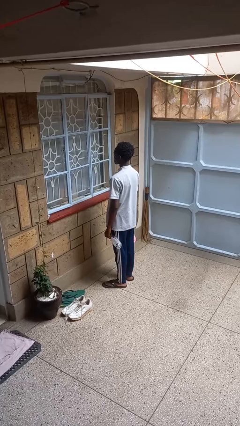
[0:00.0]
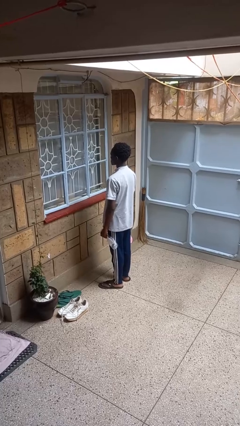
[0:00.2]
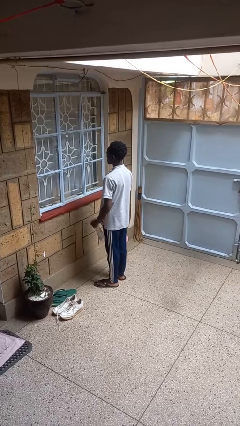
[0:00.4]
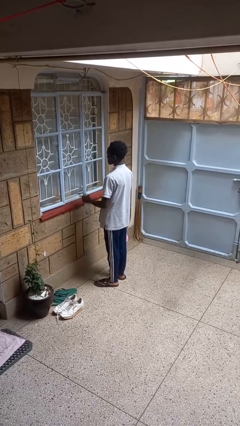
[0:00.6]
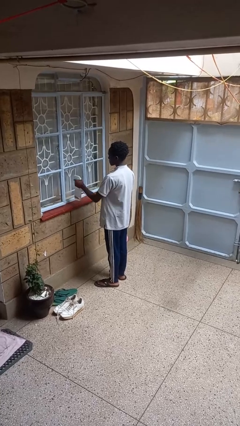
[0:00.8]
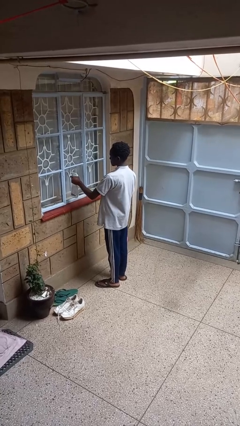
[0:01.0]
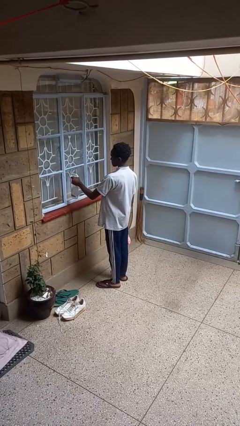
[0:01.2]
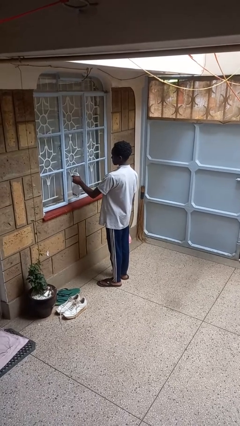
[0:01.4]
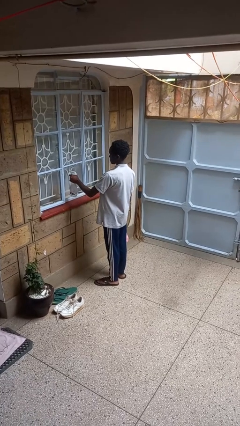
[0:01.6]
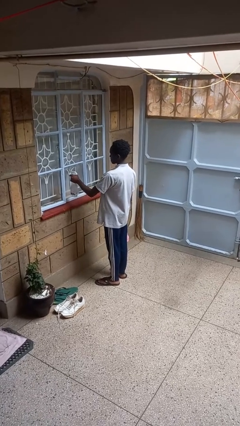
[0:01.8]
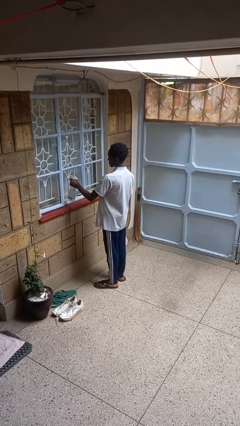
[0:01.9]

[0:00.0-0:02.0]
person sprays from bottle

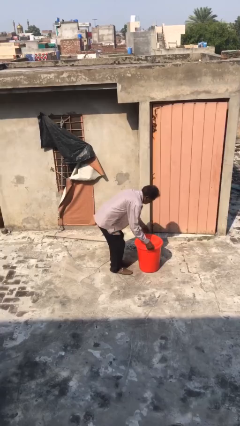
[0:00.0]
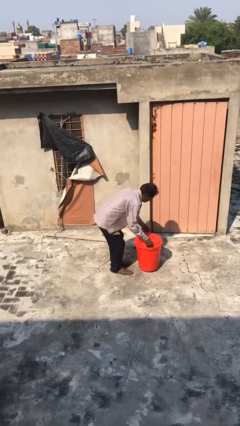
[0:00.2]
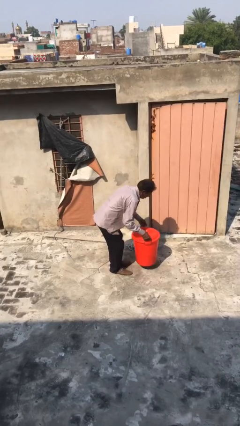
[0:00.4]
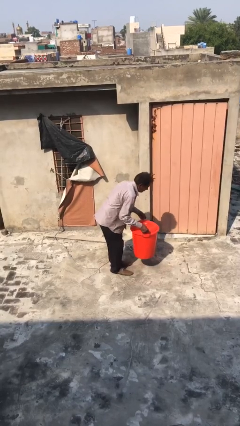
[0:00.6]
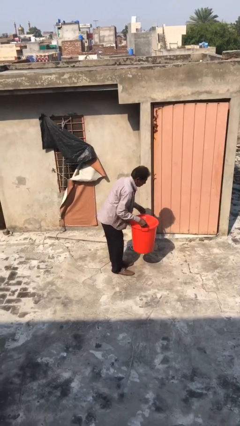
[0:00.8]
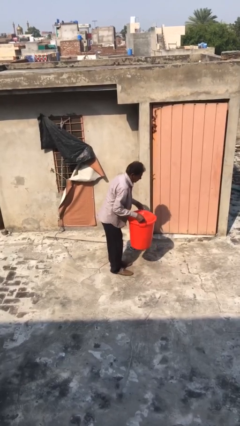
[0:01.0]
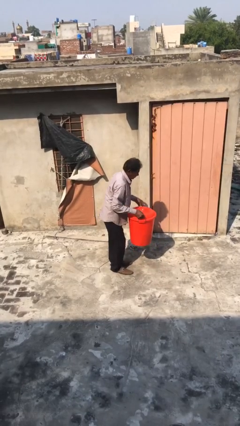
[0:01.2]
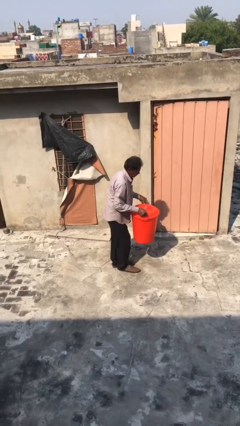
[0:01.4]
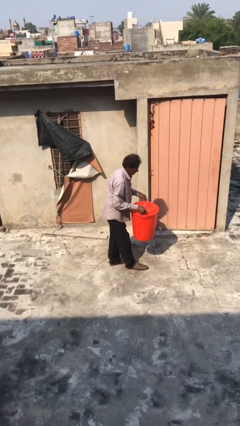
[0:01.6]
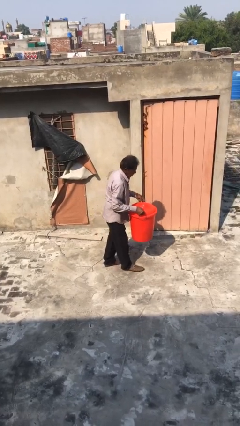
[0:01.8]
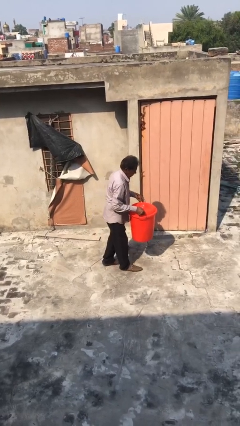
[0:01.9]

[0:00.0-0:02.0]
person picks up object from floor

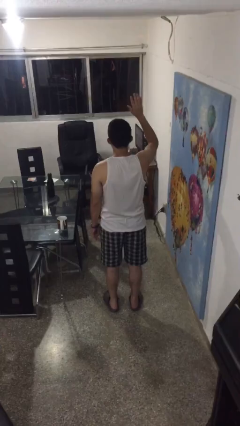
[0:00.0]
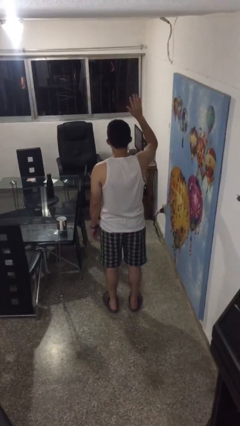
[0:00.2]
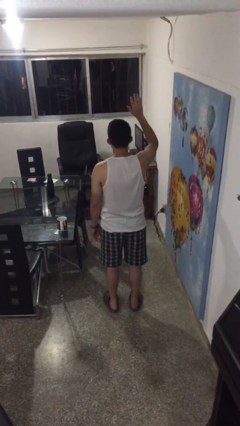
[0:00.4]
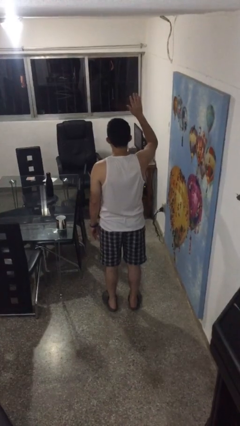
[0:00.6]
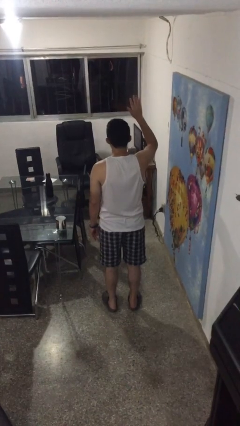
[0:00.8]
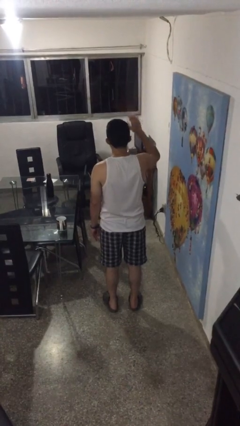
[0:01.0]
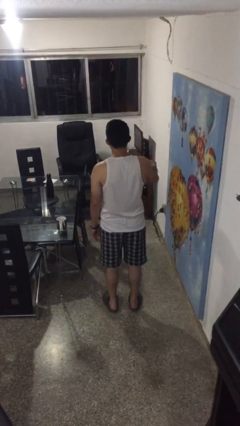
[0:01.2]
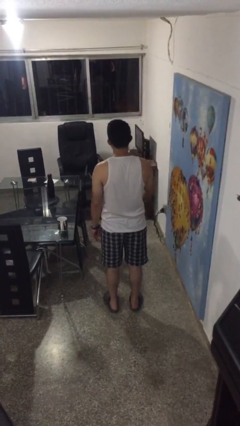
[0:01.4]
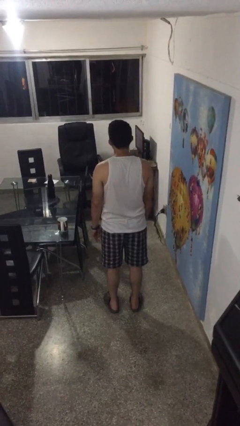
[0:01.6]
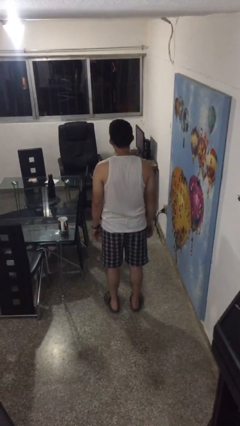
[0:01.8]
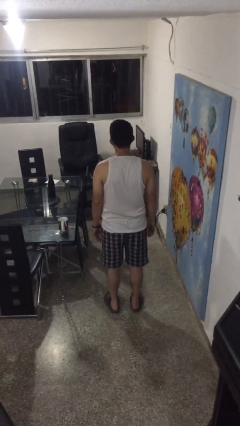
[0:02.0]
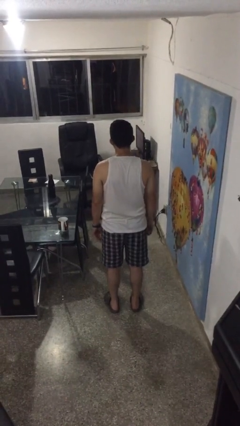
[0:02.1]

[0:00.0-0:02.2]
person gestures lower hand

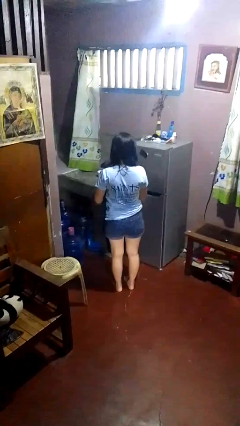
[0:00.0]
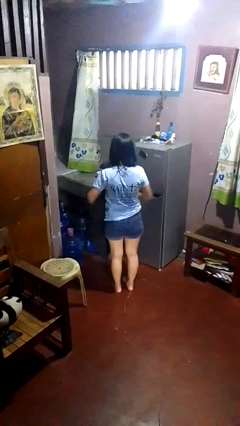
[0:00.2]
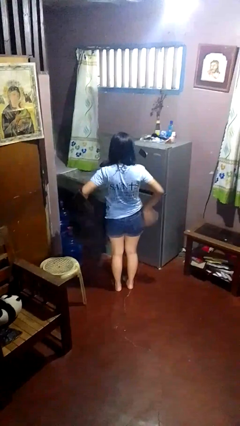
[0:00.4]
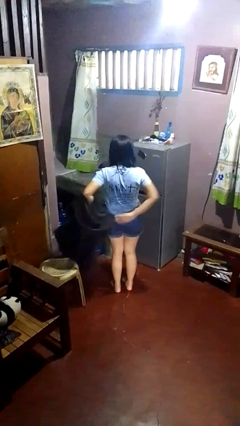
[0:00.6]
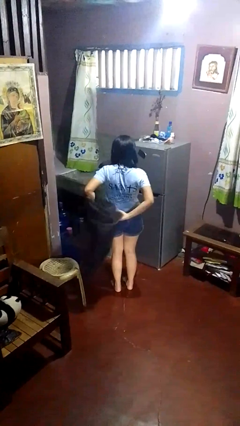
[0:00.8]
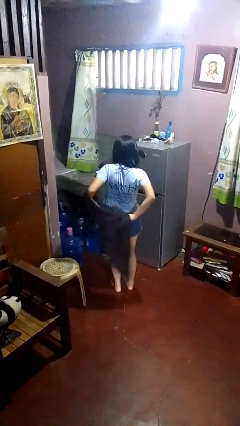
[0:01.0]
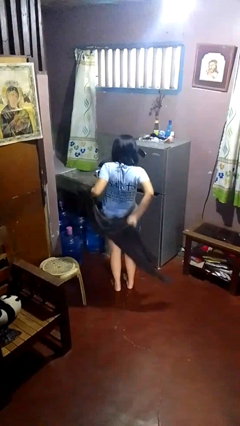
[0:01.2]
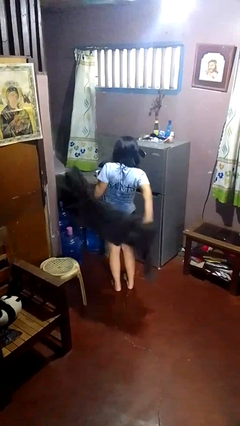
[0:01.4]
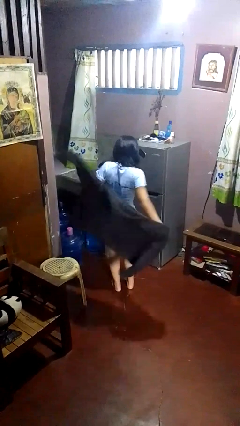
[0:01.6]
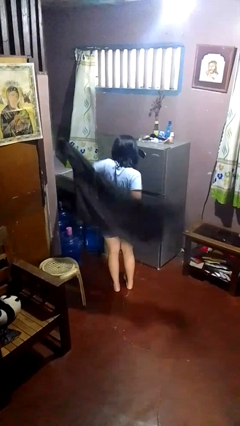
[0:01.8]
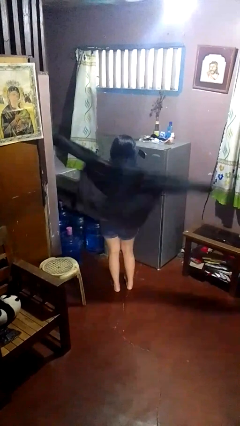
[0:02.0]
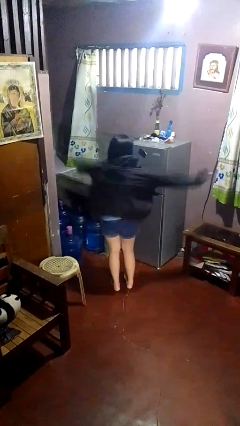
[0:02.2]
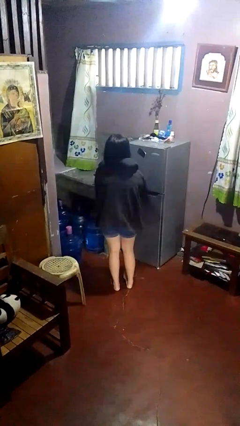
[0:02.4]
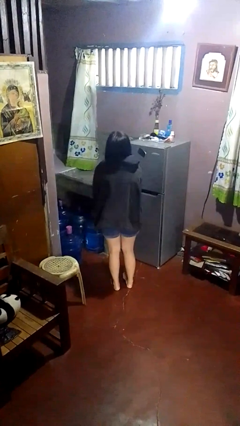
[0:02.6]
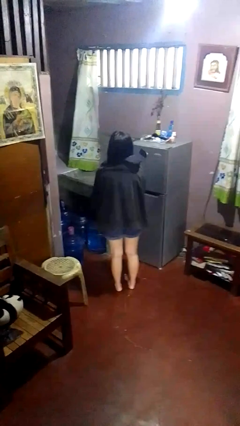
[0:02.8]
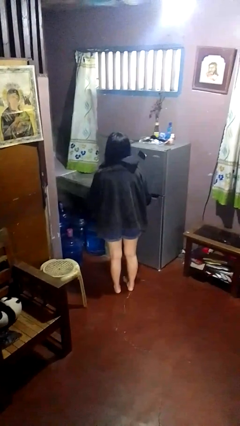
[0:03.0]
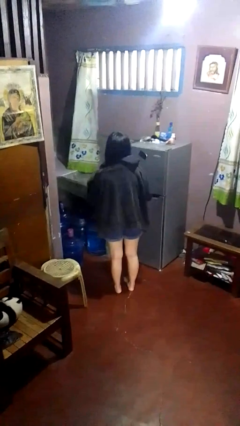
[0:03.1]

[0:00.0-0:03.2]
person puts on jacket

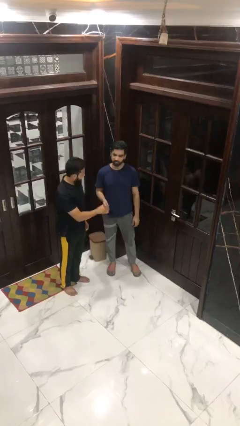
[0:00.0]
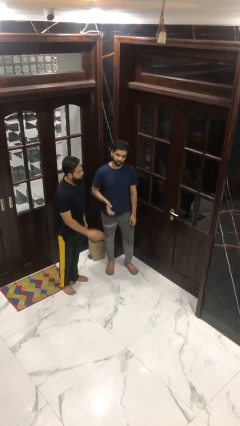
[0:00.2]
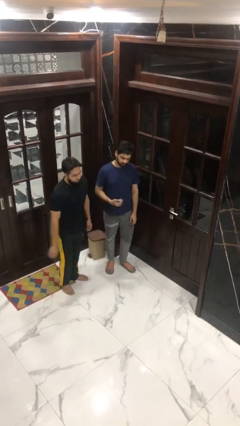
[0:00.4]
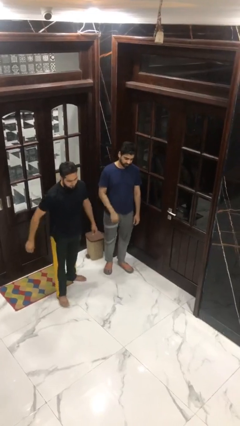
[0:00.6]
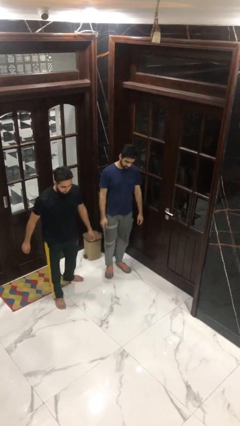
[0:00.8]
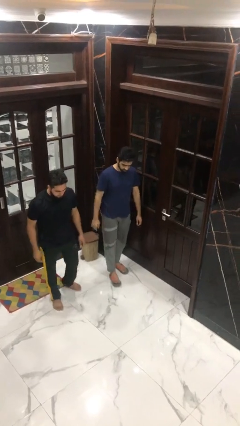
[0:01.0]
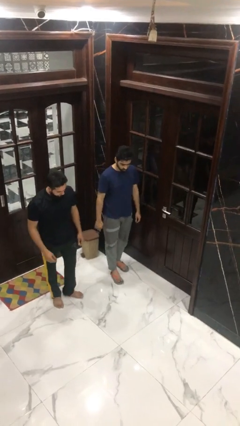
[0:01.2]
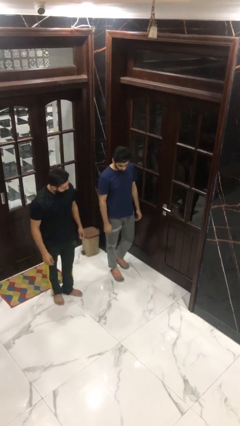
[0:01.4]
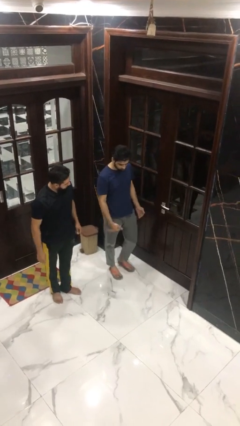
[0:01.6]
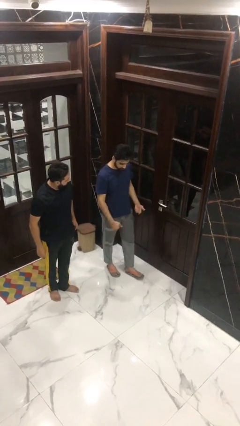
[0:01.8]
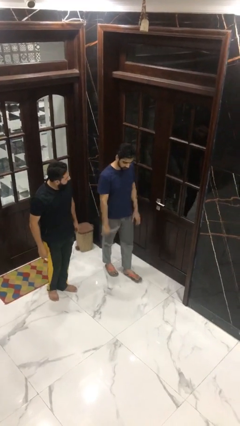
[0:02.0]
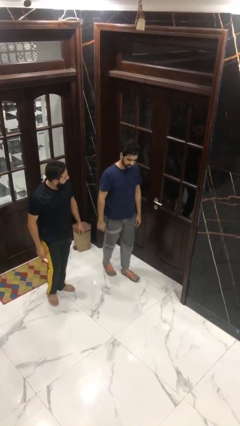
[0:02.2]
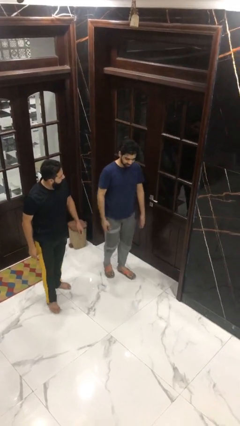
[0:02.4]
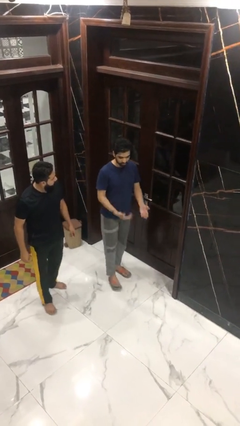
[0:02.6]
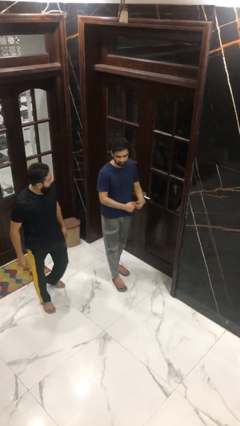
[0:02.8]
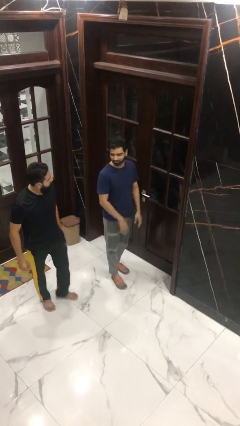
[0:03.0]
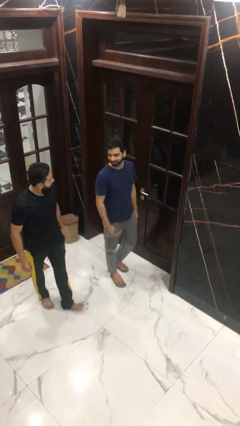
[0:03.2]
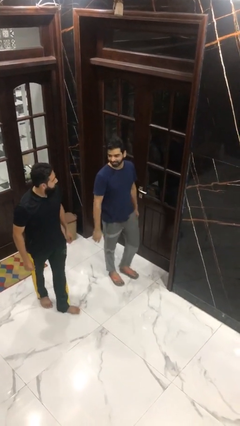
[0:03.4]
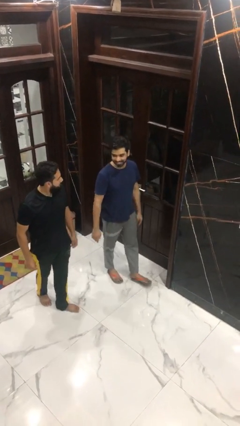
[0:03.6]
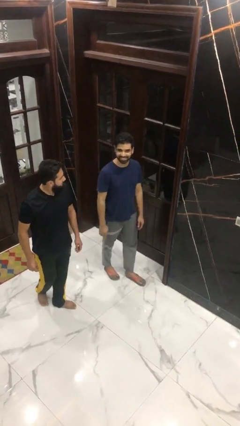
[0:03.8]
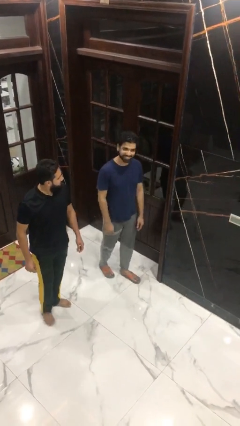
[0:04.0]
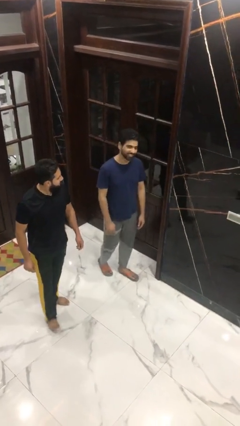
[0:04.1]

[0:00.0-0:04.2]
person talks to person

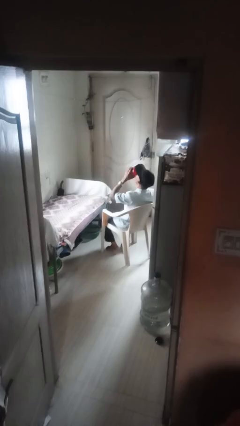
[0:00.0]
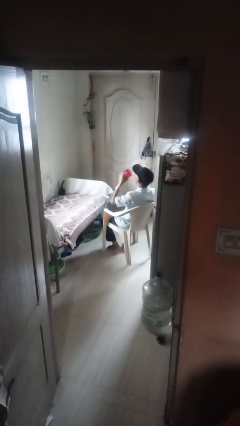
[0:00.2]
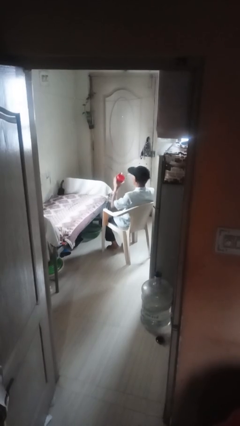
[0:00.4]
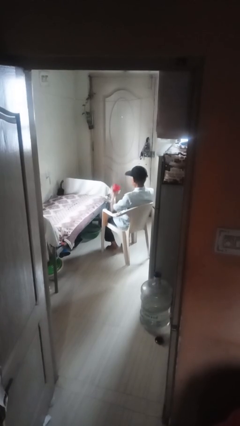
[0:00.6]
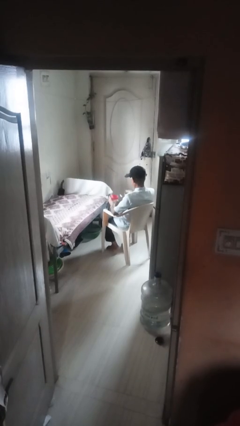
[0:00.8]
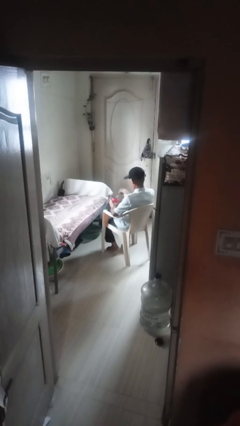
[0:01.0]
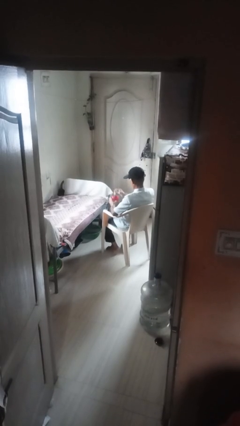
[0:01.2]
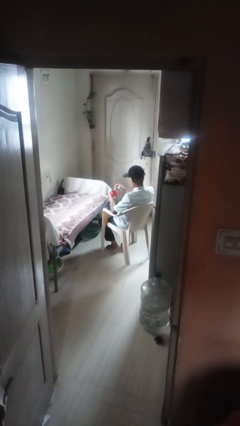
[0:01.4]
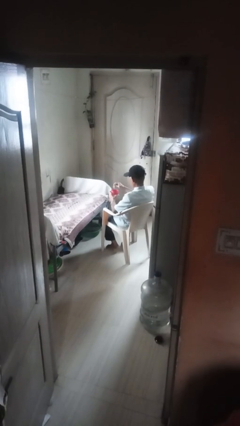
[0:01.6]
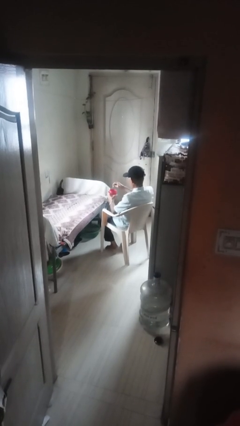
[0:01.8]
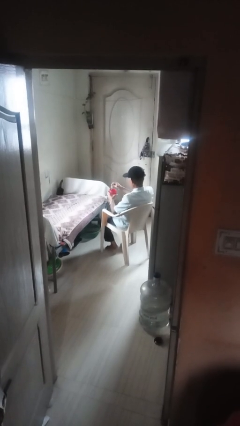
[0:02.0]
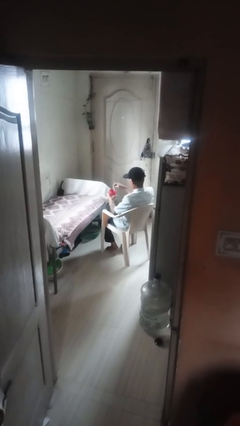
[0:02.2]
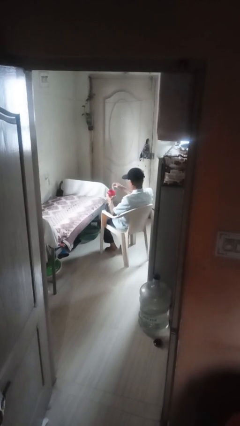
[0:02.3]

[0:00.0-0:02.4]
person stirs mug

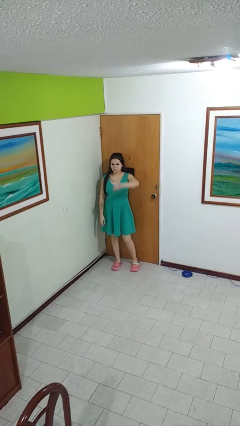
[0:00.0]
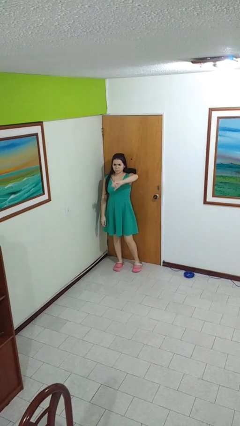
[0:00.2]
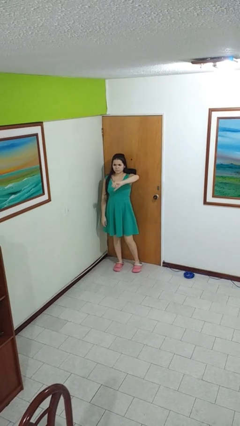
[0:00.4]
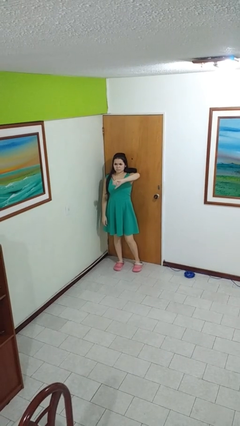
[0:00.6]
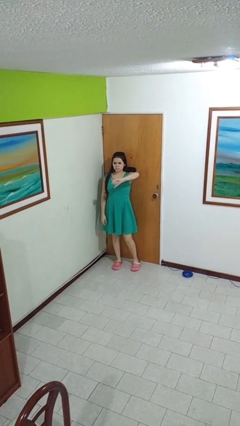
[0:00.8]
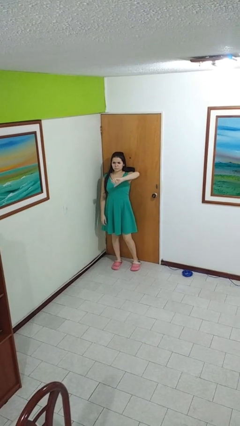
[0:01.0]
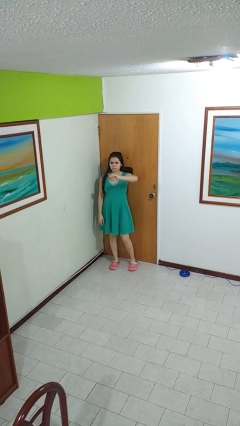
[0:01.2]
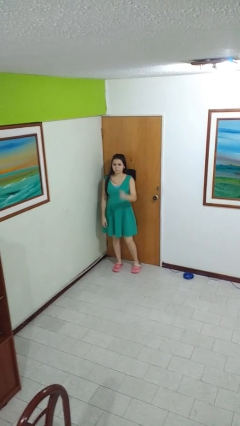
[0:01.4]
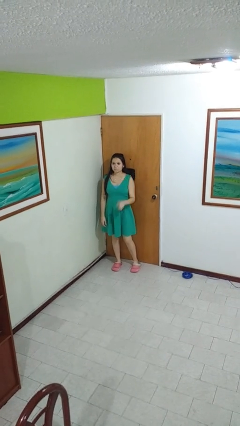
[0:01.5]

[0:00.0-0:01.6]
person gestures thumbs down
